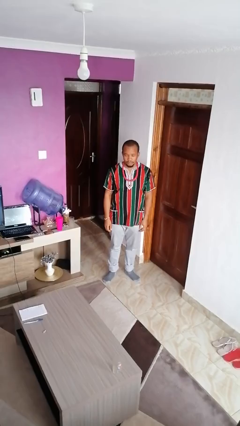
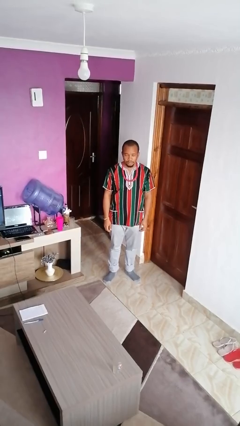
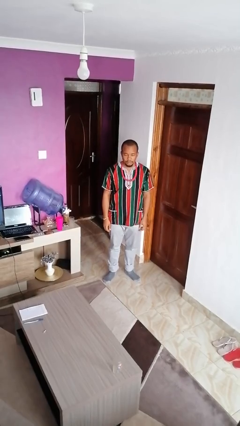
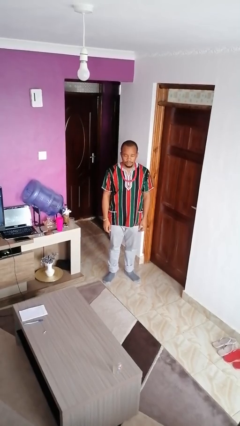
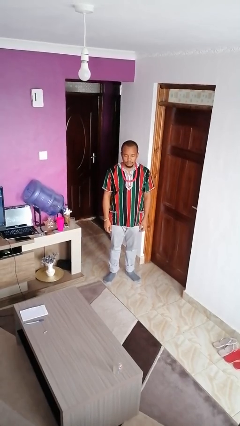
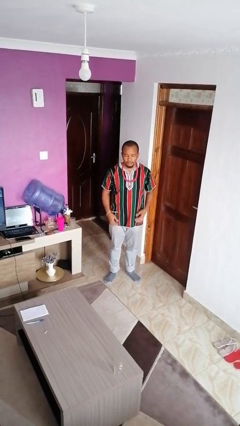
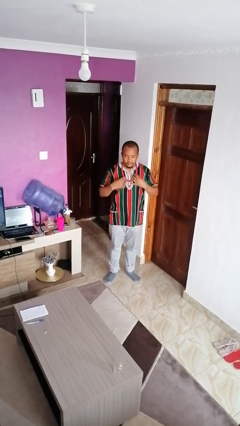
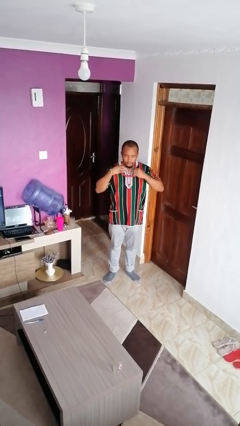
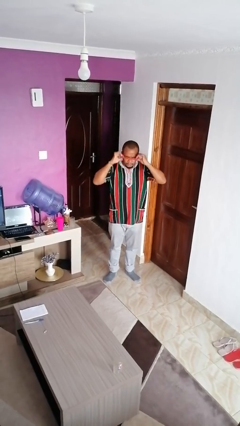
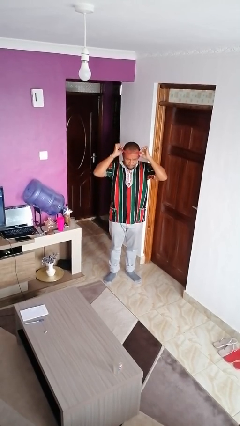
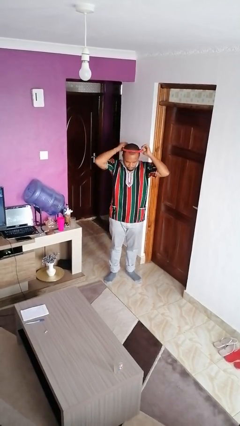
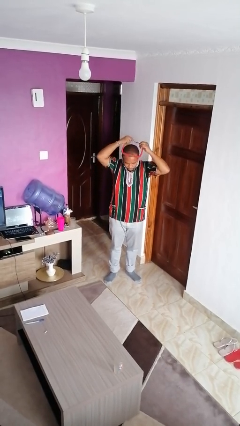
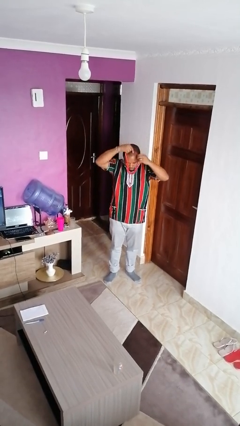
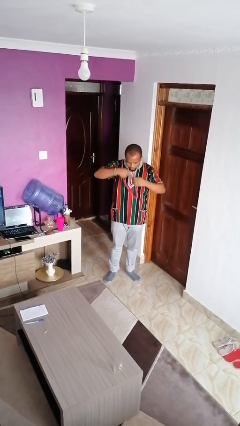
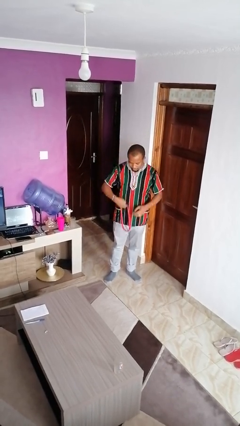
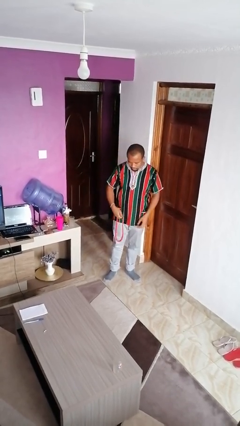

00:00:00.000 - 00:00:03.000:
person takes off necklace

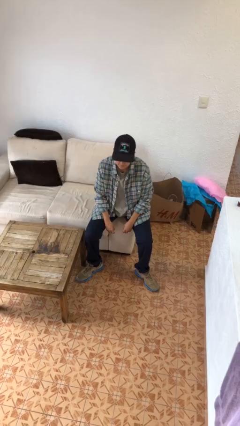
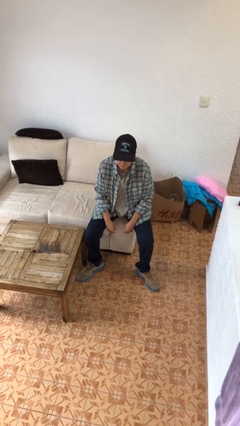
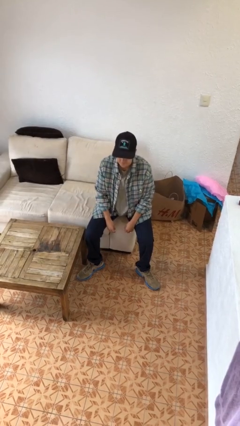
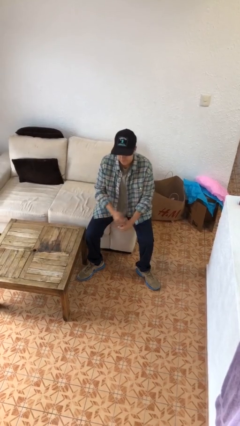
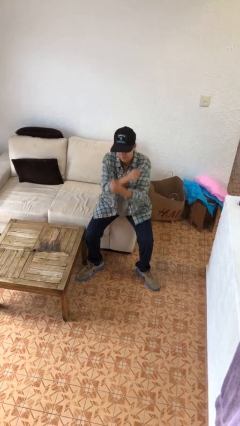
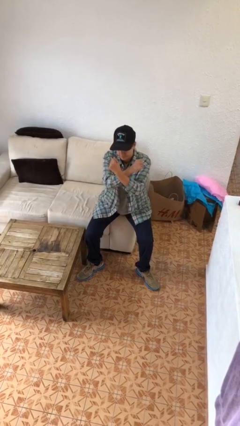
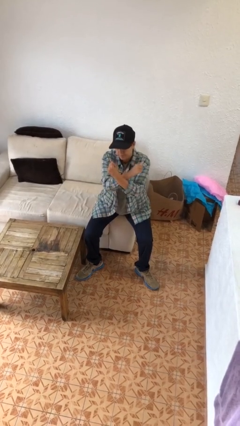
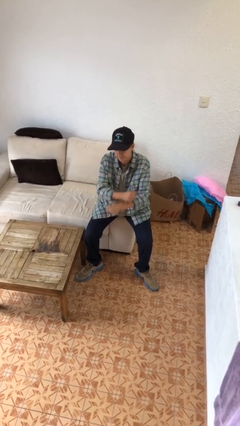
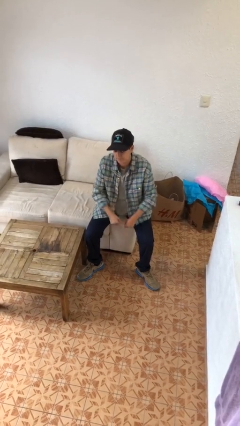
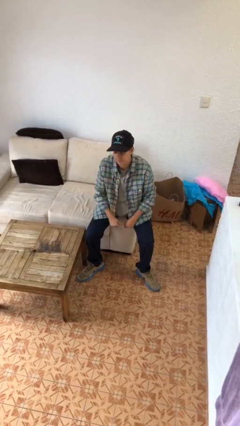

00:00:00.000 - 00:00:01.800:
person gestures arms x

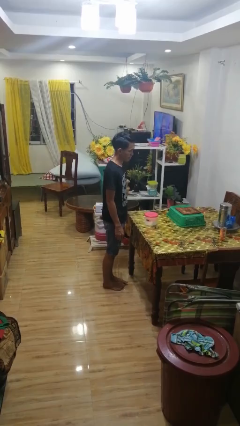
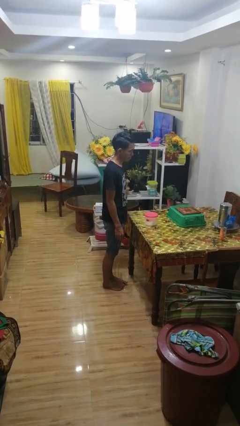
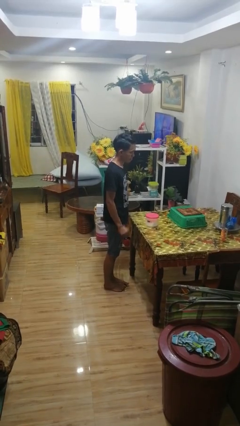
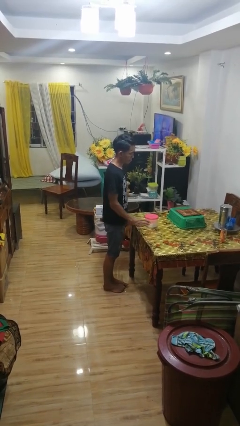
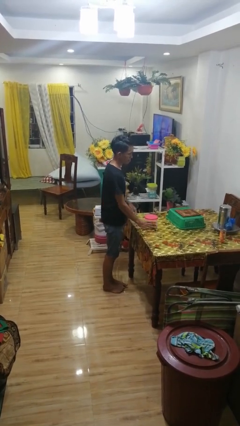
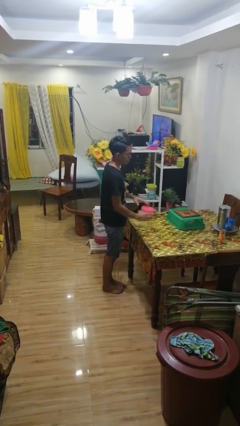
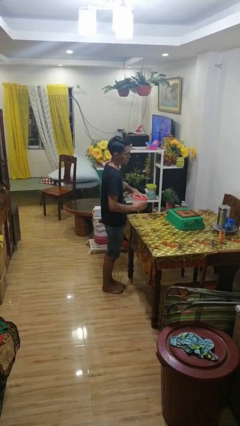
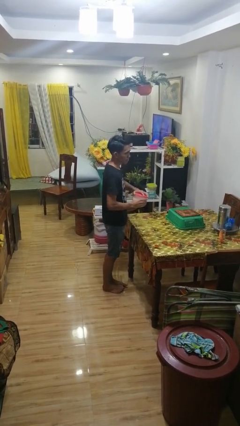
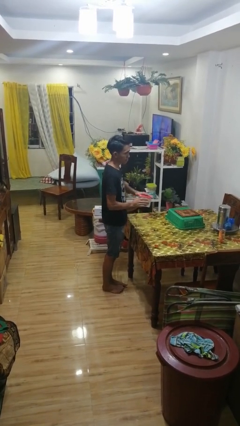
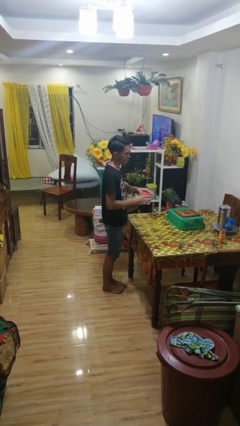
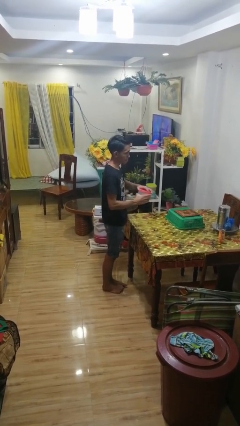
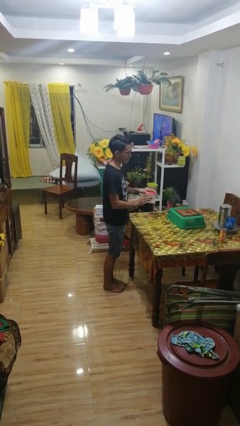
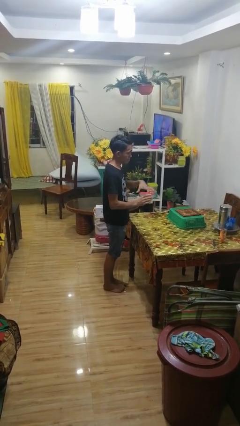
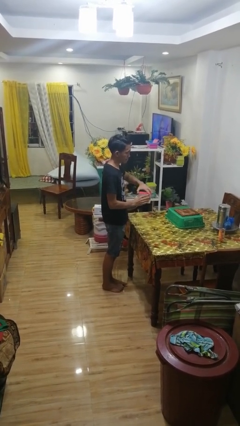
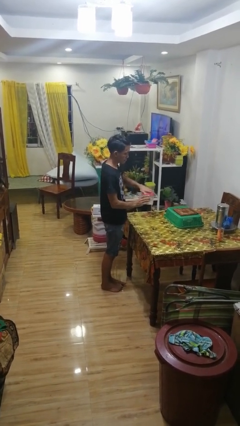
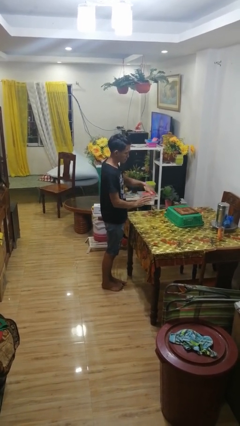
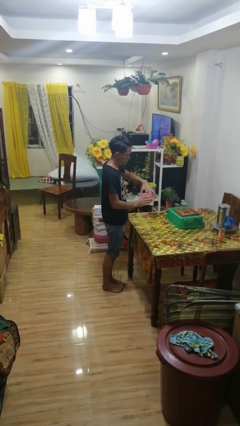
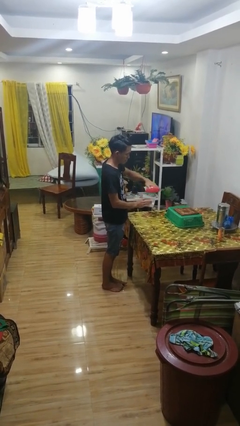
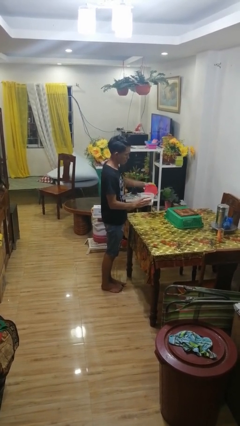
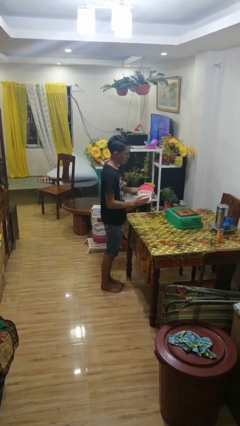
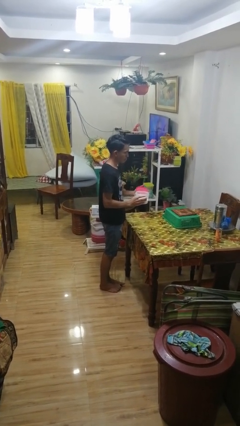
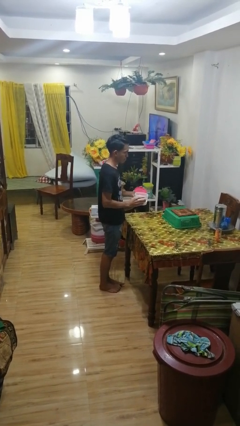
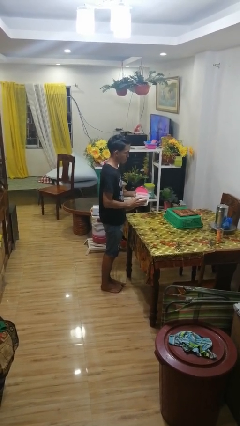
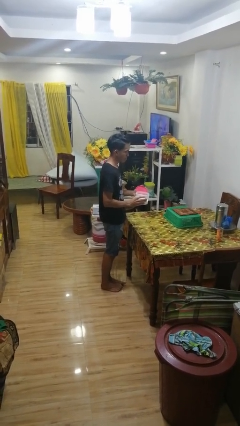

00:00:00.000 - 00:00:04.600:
person opens jar

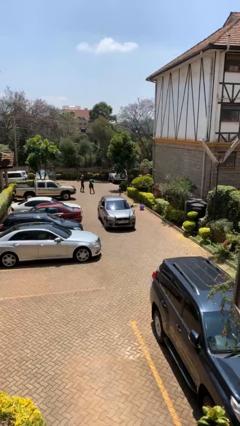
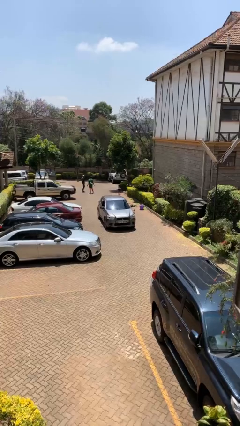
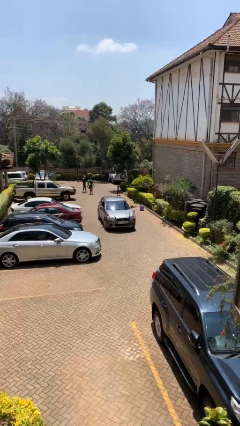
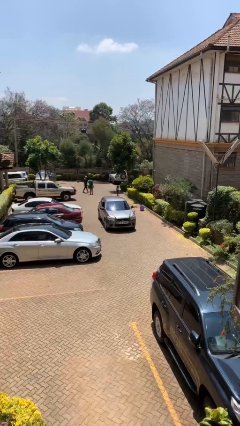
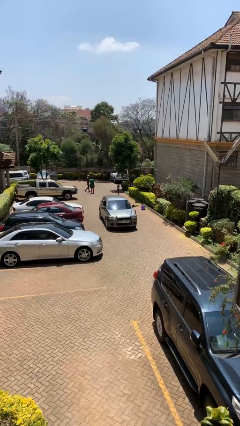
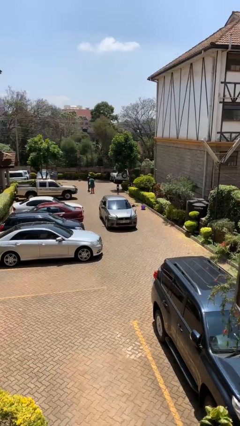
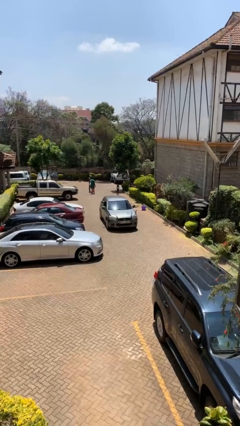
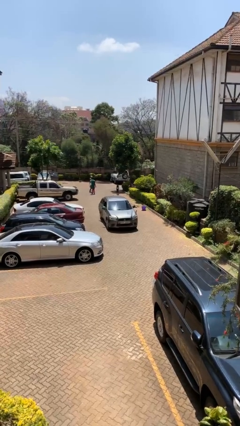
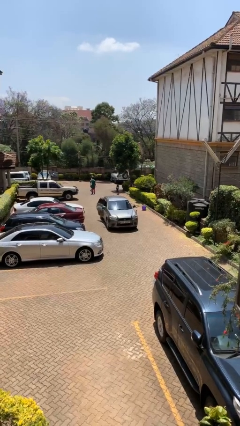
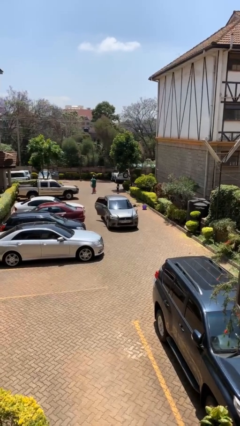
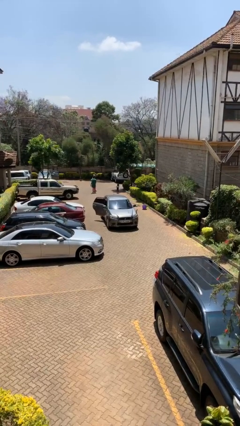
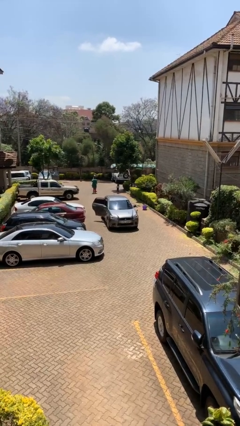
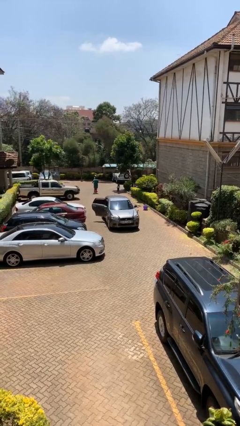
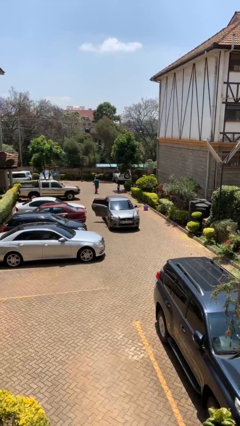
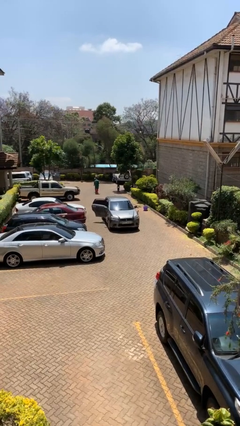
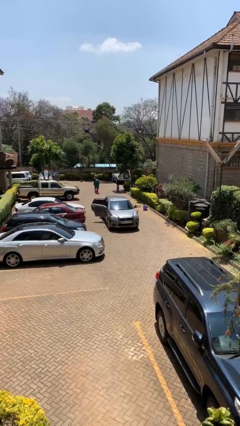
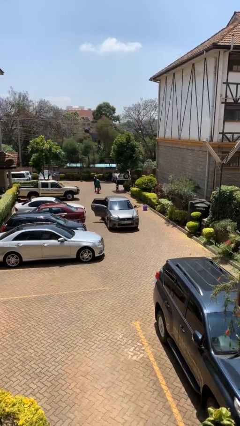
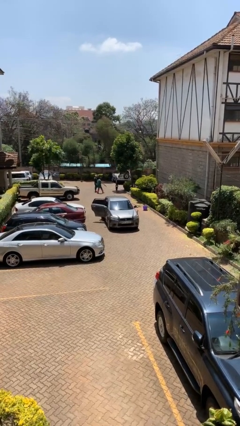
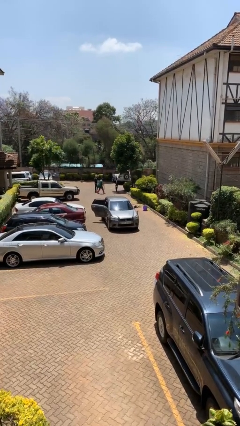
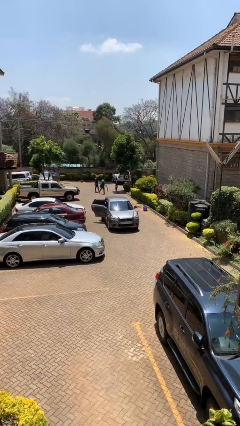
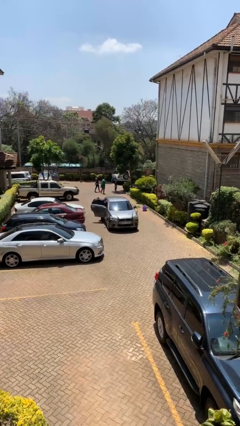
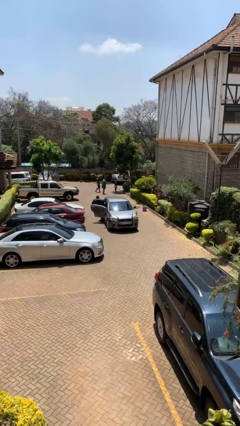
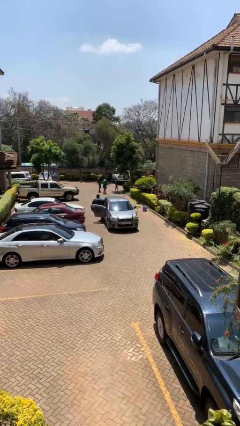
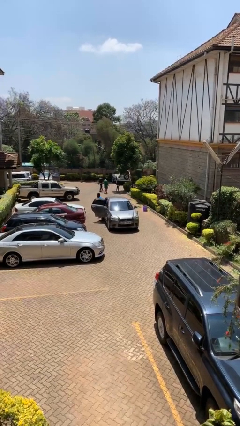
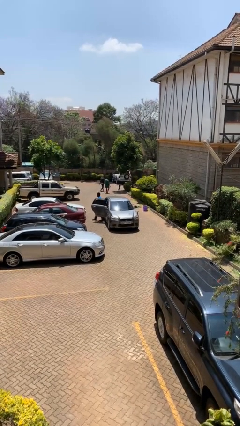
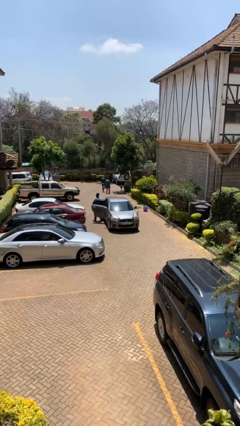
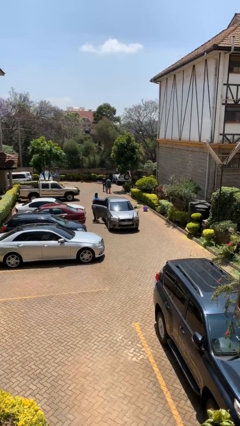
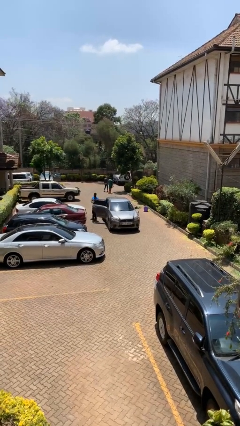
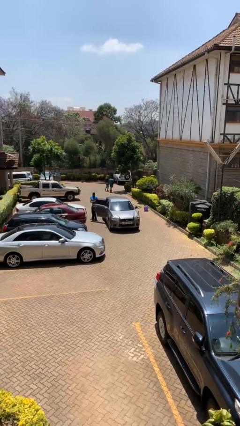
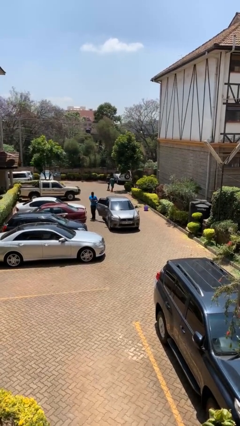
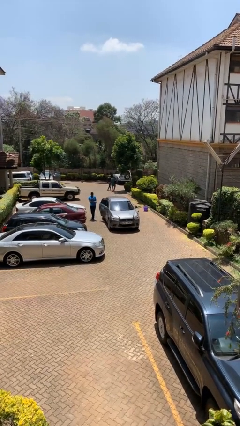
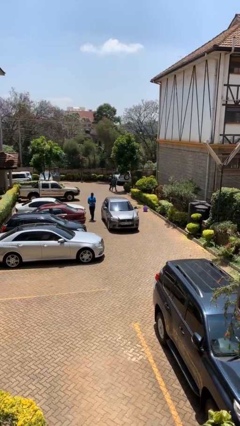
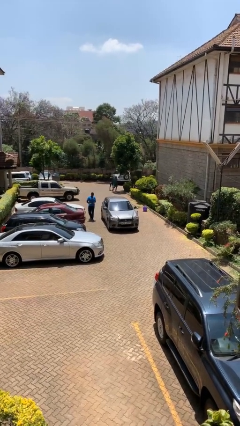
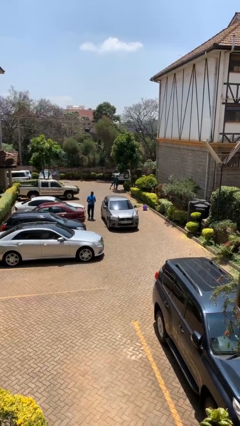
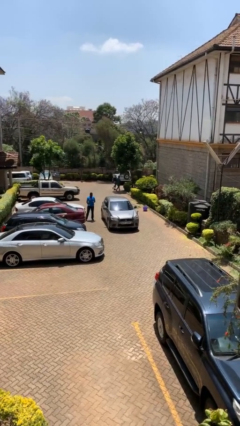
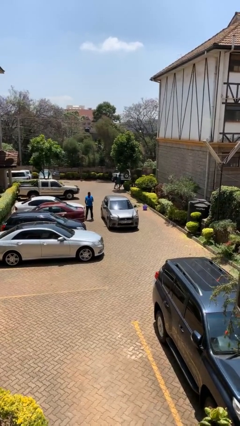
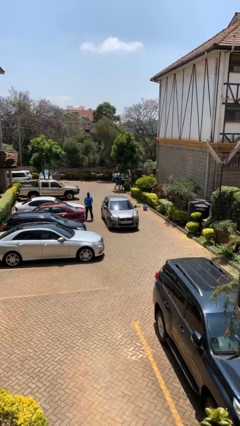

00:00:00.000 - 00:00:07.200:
car drops off person

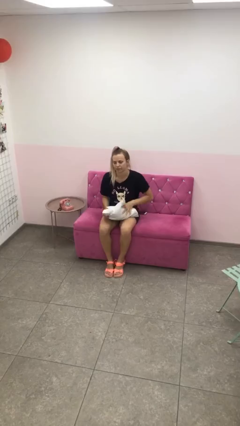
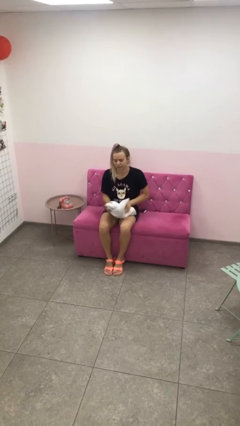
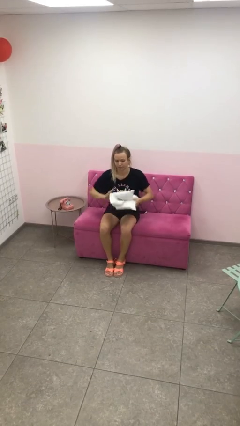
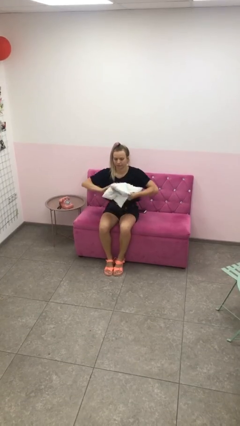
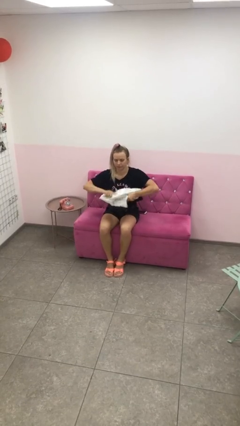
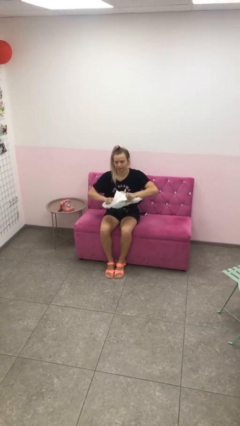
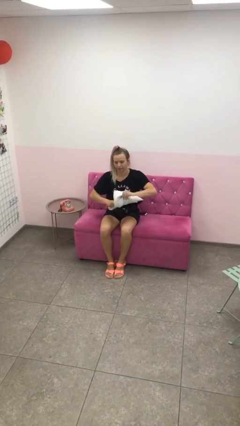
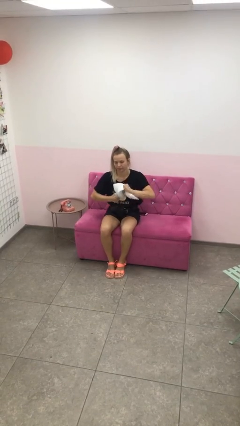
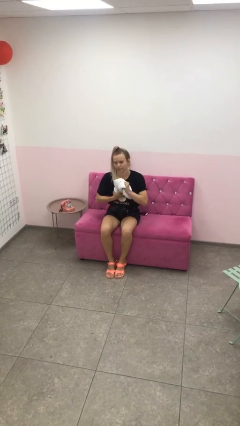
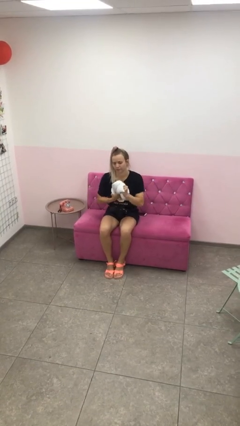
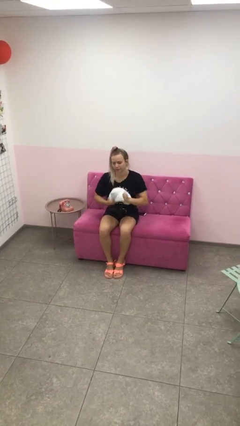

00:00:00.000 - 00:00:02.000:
person squeezes object
